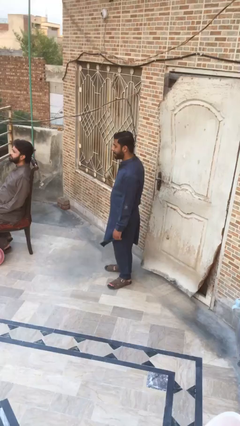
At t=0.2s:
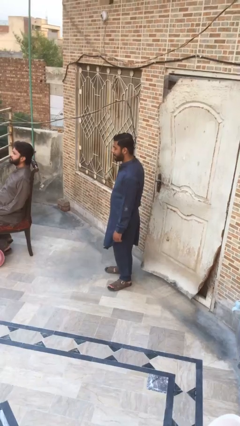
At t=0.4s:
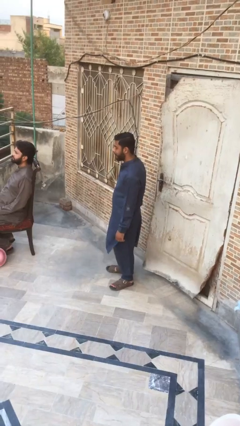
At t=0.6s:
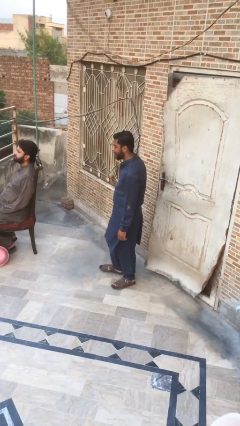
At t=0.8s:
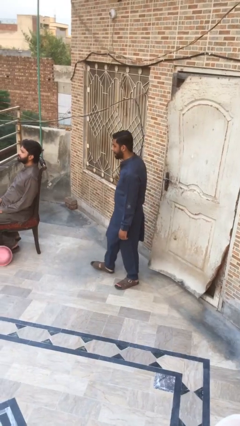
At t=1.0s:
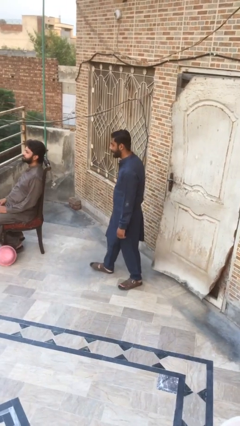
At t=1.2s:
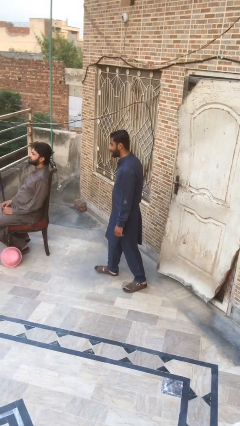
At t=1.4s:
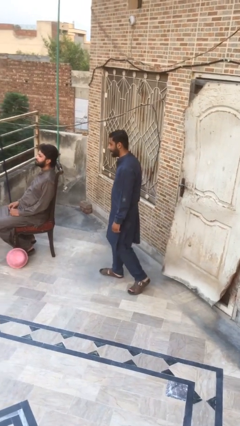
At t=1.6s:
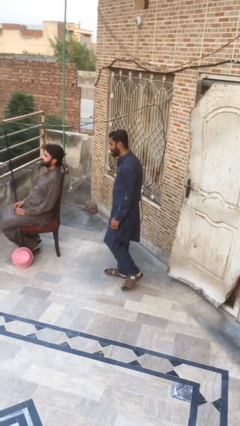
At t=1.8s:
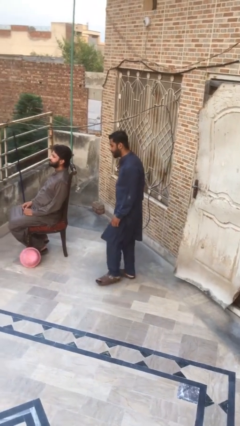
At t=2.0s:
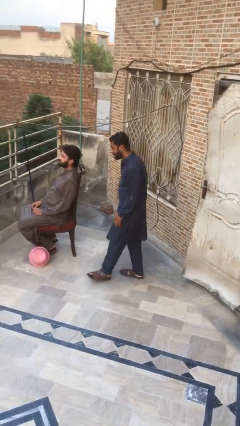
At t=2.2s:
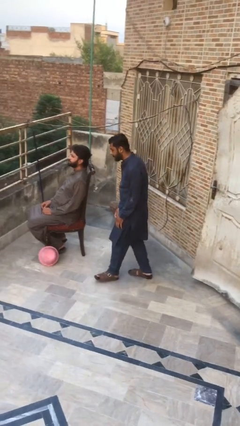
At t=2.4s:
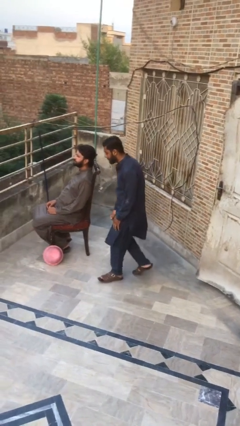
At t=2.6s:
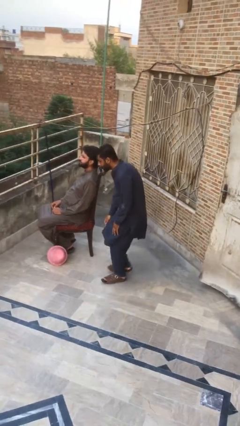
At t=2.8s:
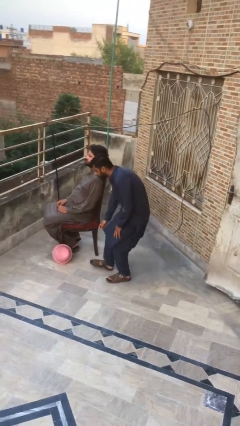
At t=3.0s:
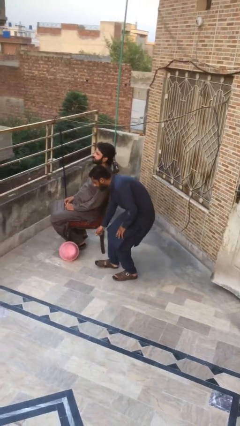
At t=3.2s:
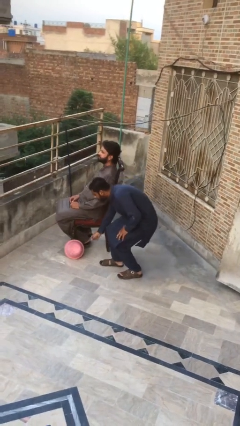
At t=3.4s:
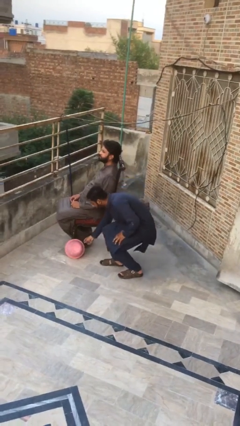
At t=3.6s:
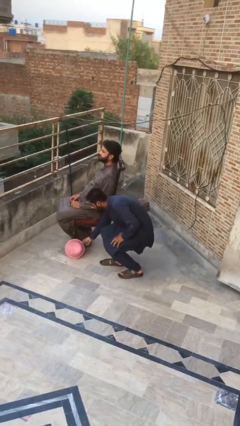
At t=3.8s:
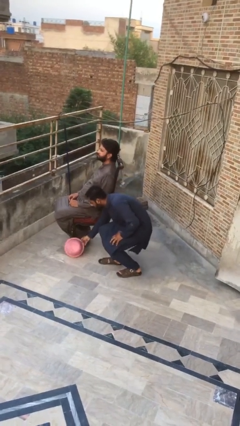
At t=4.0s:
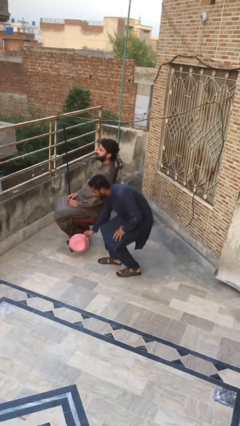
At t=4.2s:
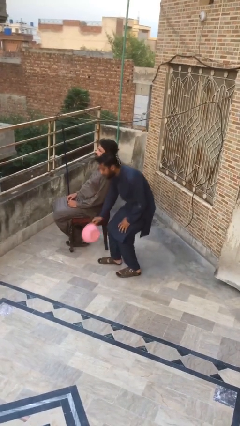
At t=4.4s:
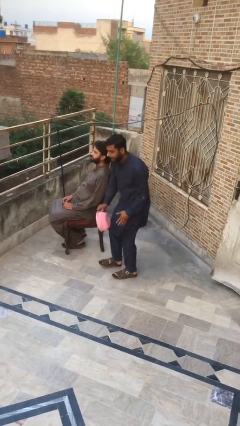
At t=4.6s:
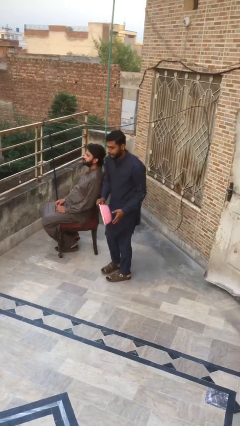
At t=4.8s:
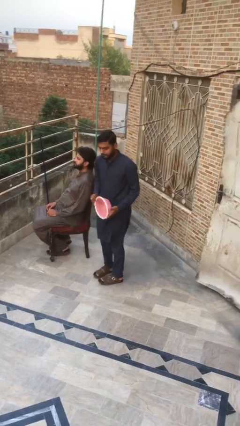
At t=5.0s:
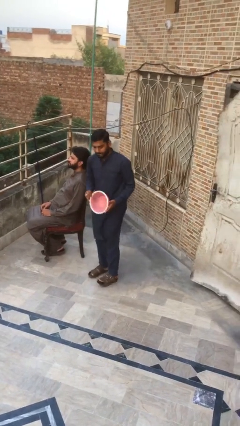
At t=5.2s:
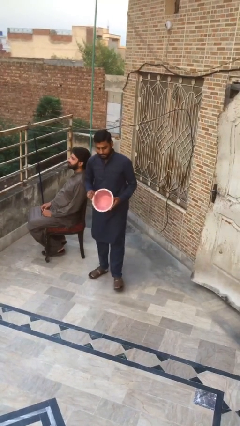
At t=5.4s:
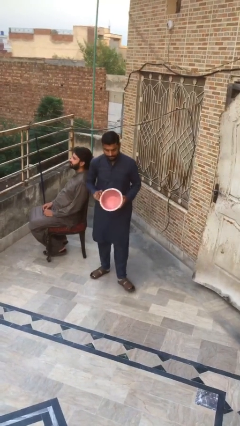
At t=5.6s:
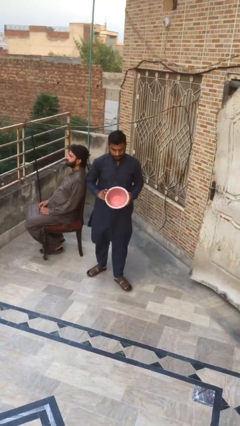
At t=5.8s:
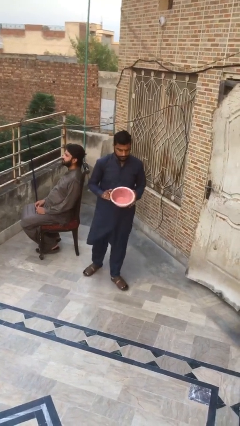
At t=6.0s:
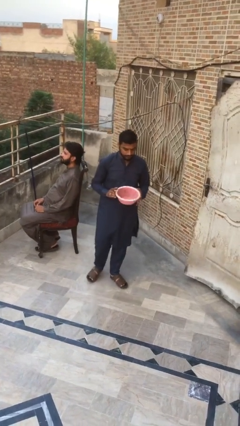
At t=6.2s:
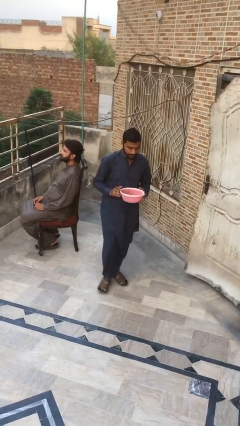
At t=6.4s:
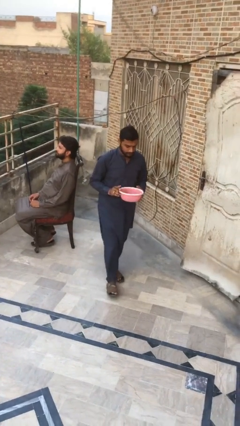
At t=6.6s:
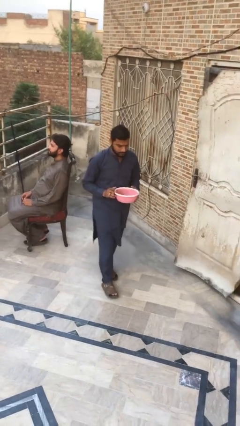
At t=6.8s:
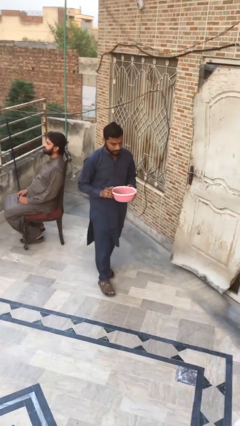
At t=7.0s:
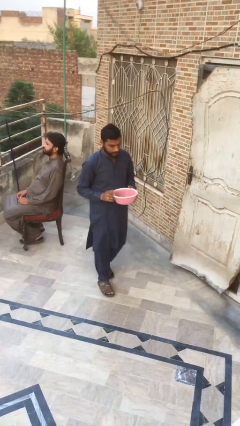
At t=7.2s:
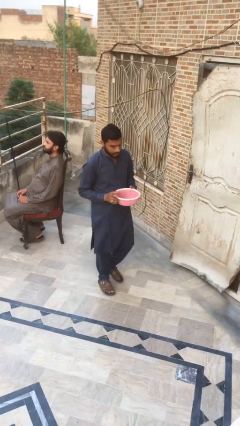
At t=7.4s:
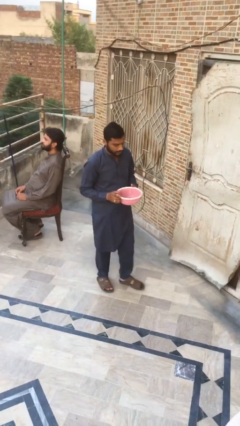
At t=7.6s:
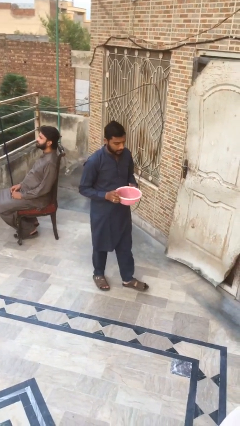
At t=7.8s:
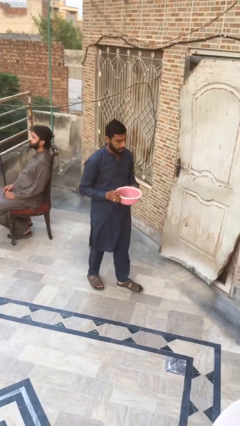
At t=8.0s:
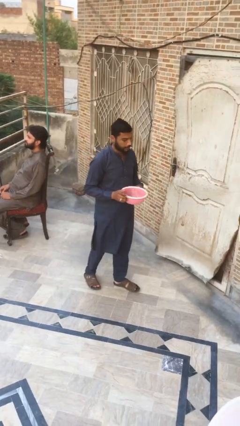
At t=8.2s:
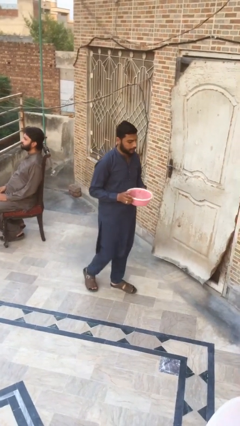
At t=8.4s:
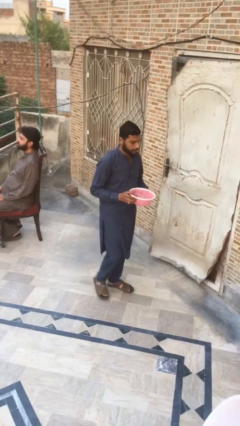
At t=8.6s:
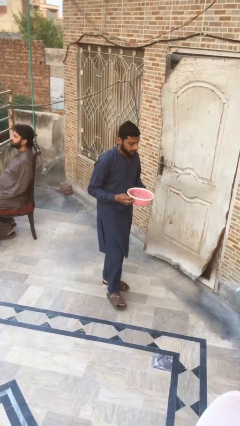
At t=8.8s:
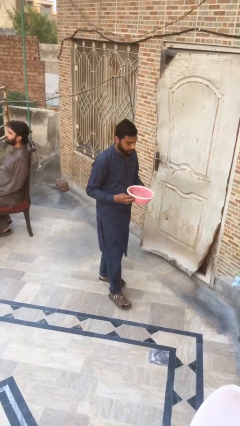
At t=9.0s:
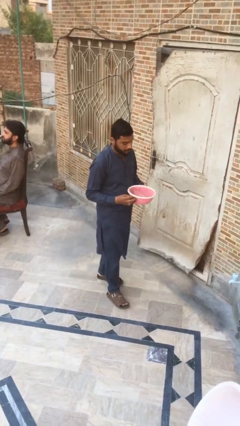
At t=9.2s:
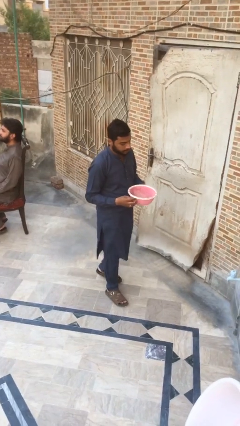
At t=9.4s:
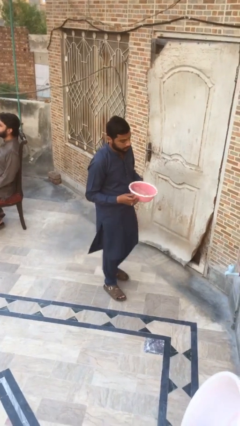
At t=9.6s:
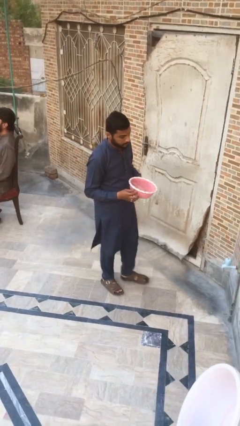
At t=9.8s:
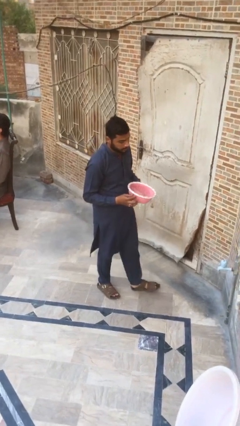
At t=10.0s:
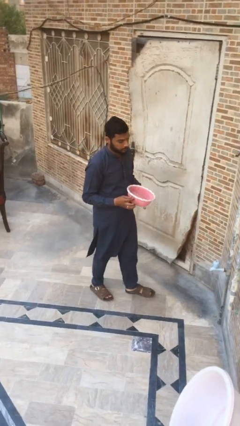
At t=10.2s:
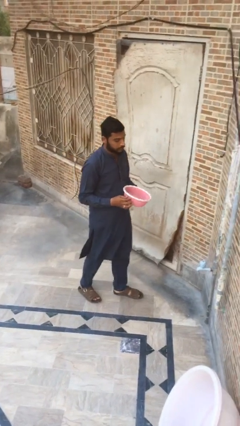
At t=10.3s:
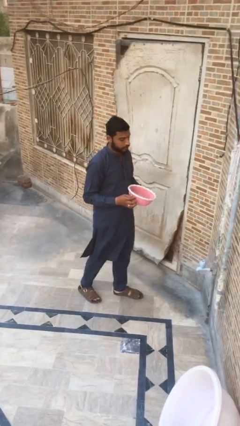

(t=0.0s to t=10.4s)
person steals object from person

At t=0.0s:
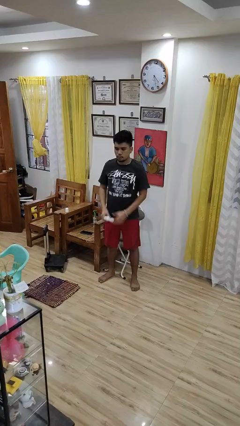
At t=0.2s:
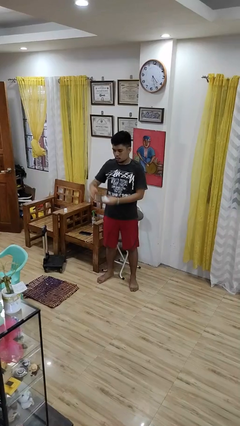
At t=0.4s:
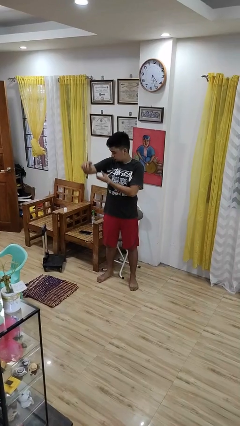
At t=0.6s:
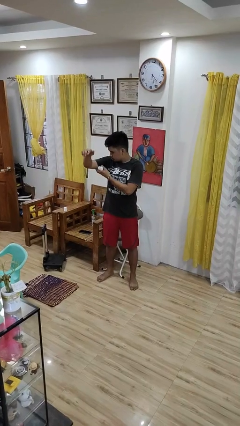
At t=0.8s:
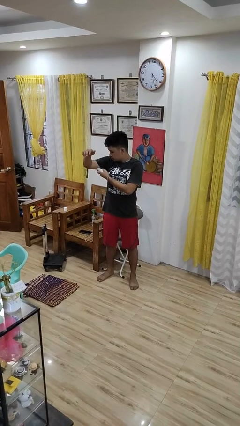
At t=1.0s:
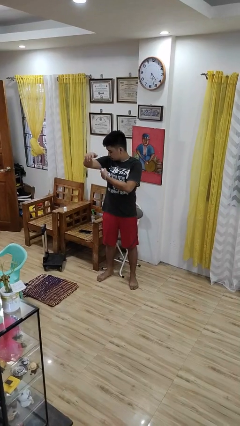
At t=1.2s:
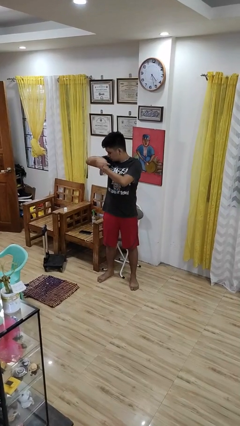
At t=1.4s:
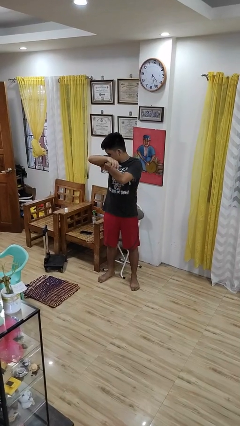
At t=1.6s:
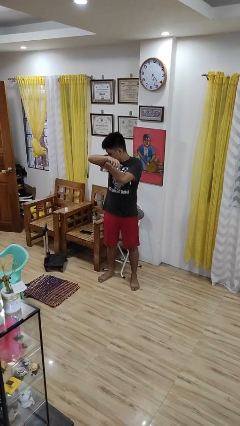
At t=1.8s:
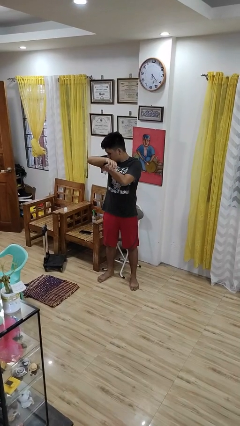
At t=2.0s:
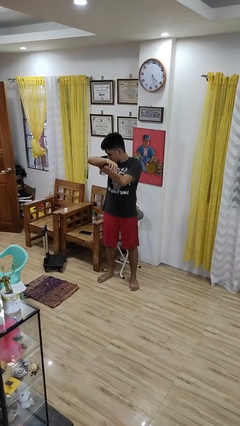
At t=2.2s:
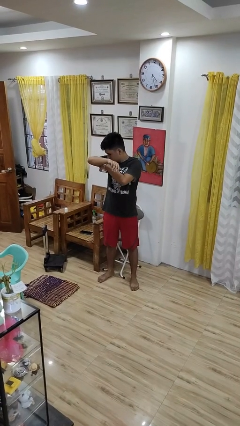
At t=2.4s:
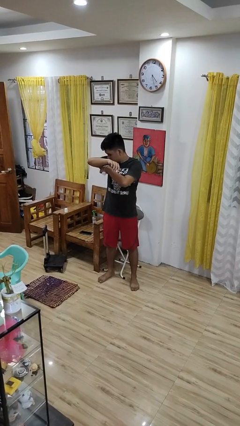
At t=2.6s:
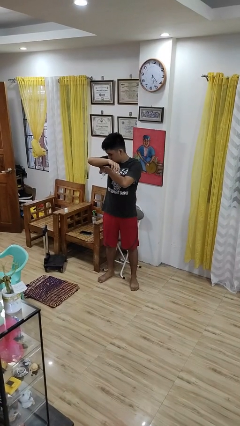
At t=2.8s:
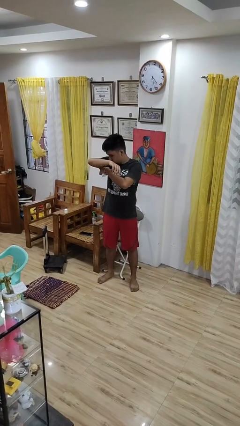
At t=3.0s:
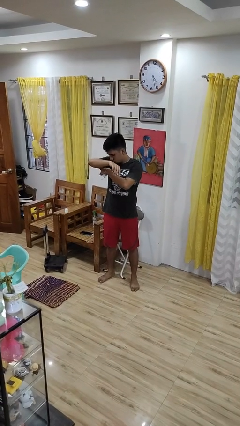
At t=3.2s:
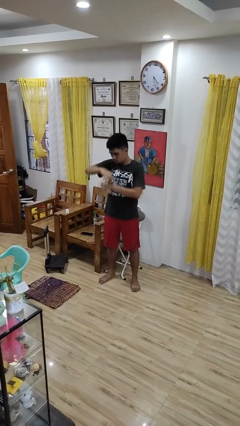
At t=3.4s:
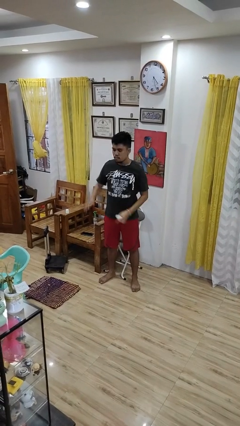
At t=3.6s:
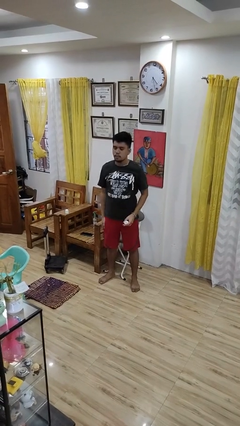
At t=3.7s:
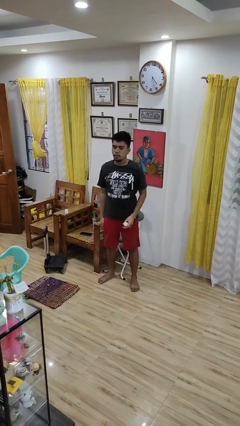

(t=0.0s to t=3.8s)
person applies deodorant

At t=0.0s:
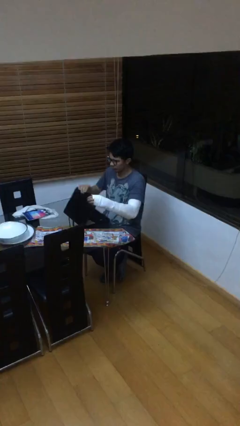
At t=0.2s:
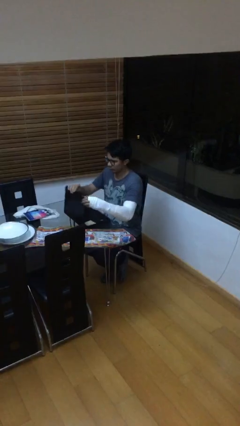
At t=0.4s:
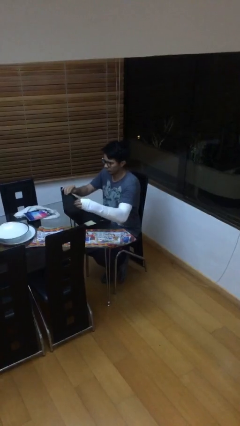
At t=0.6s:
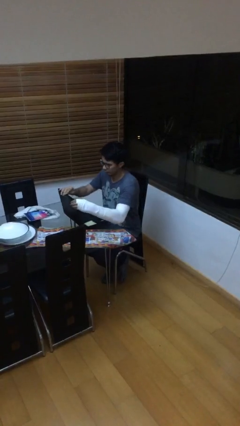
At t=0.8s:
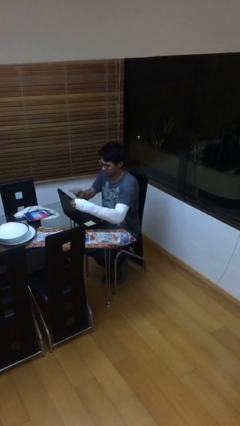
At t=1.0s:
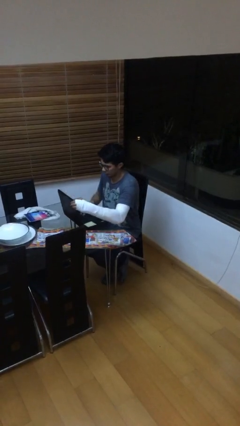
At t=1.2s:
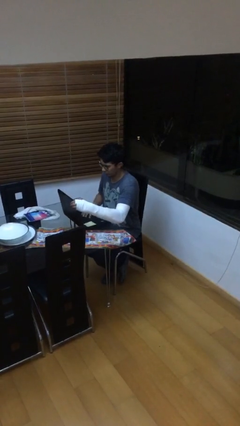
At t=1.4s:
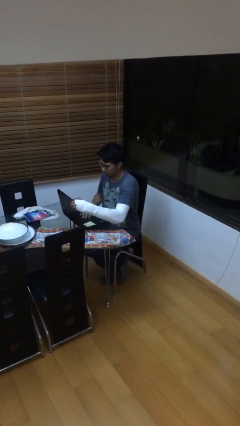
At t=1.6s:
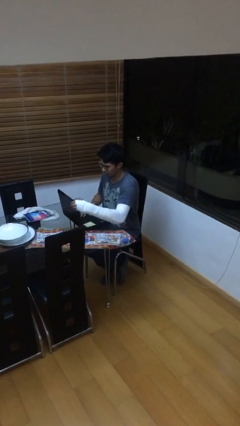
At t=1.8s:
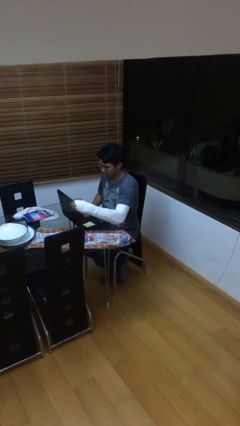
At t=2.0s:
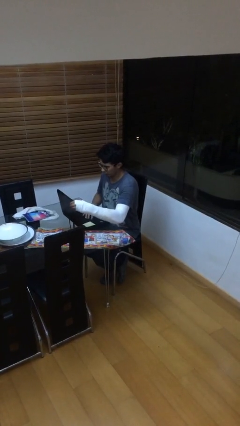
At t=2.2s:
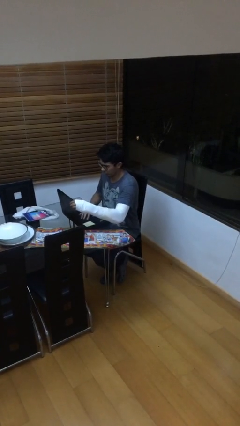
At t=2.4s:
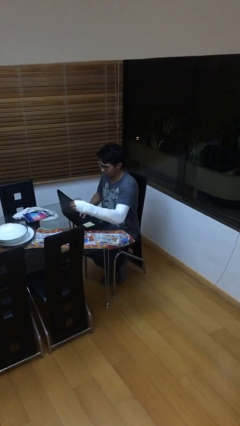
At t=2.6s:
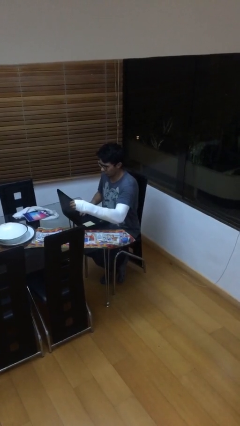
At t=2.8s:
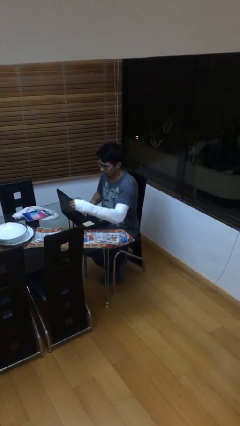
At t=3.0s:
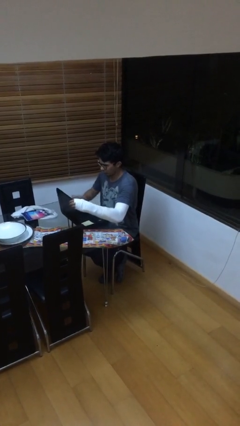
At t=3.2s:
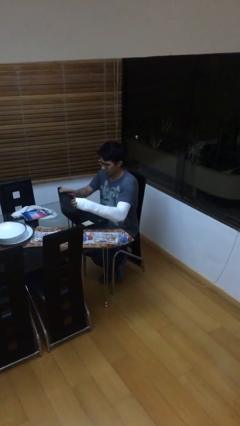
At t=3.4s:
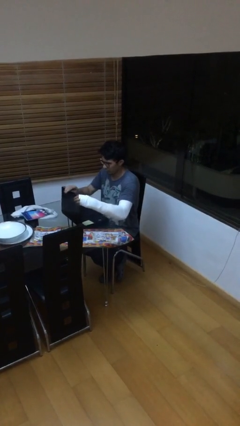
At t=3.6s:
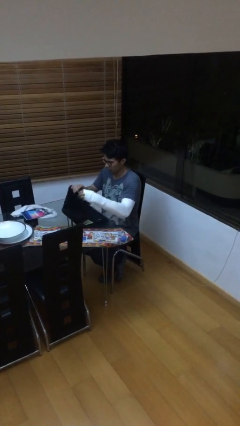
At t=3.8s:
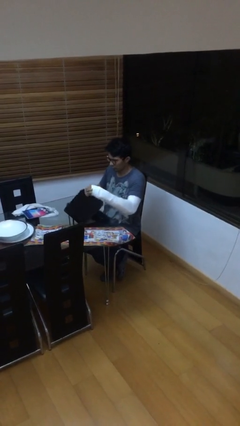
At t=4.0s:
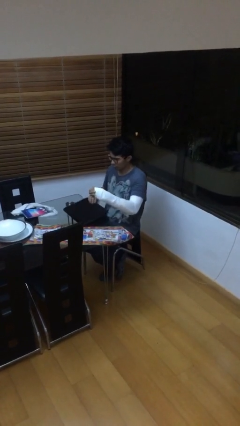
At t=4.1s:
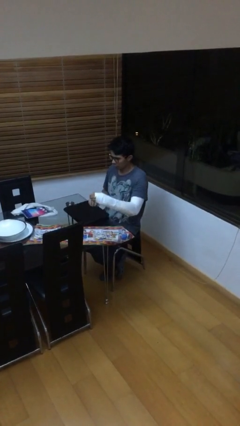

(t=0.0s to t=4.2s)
person interacts with laptop
